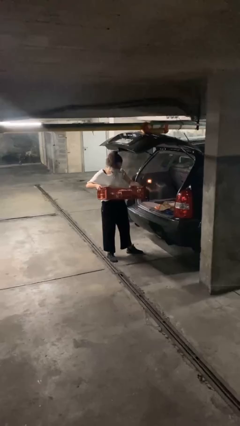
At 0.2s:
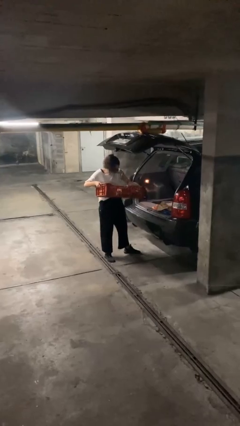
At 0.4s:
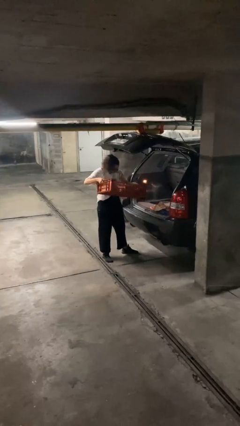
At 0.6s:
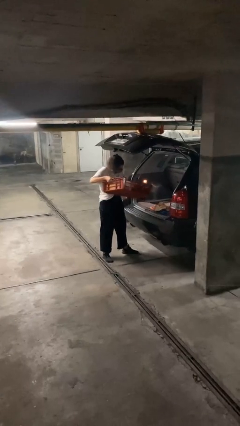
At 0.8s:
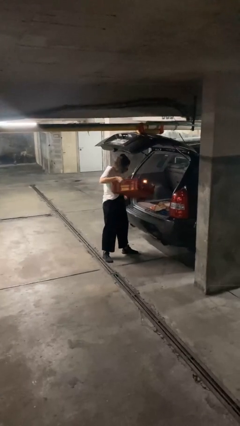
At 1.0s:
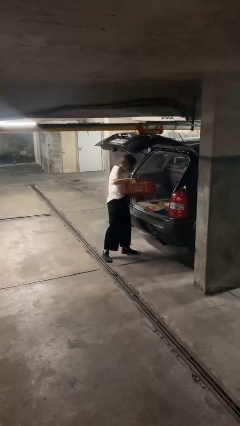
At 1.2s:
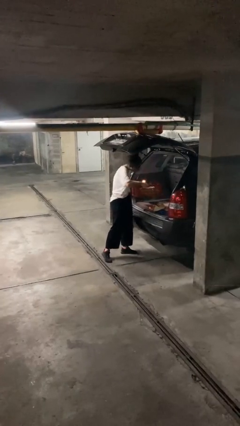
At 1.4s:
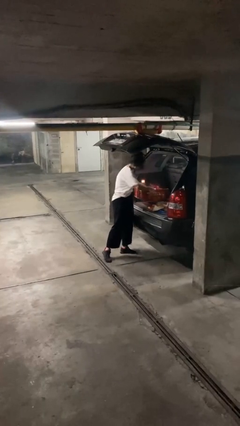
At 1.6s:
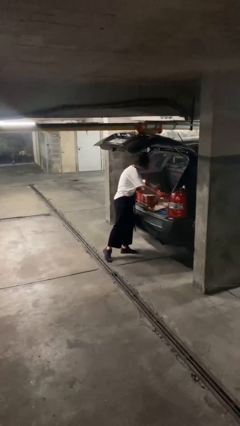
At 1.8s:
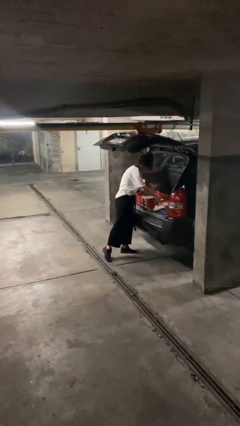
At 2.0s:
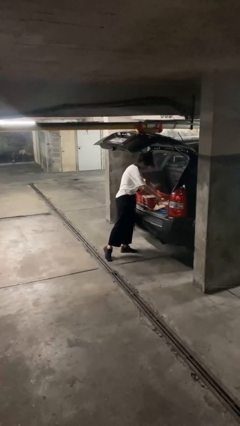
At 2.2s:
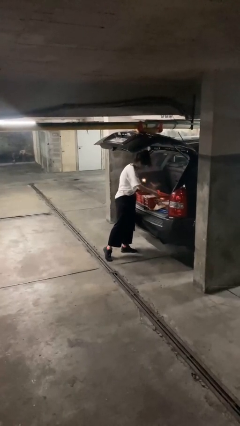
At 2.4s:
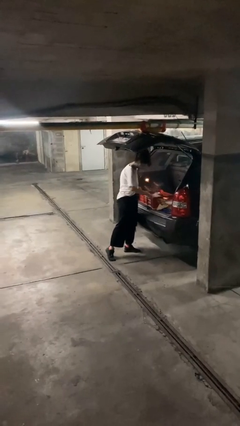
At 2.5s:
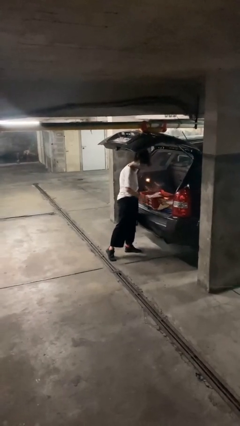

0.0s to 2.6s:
person loads car

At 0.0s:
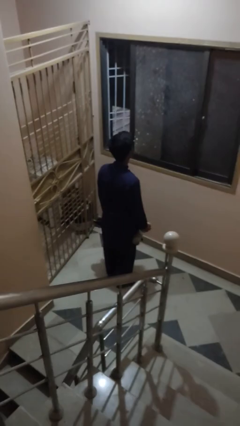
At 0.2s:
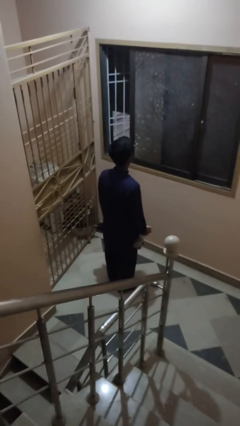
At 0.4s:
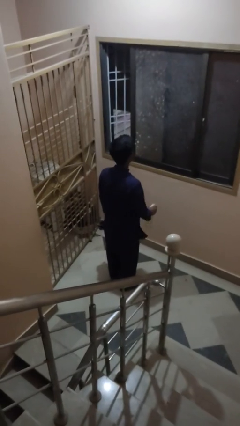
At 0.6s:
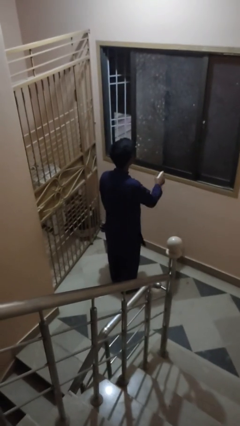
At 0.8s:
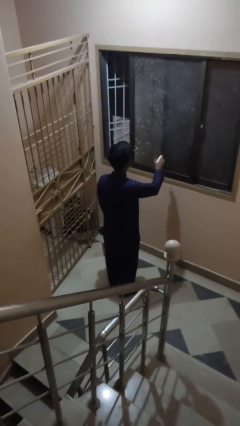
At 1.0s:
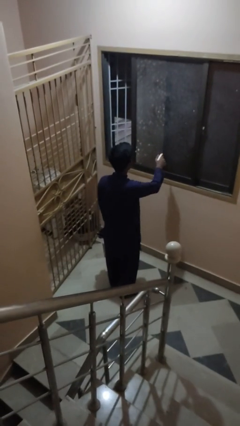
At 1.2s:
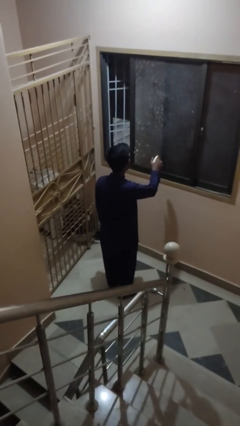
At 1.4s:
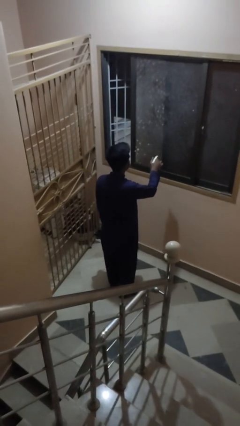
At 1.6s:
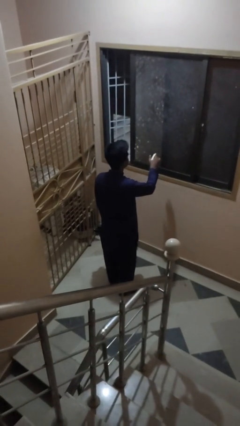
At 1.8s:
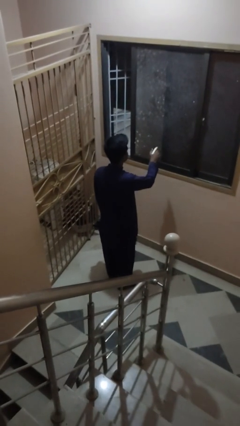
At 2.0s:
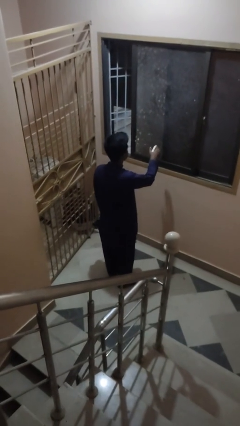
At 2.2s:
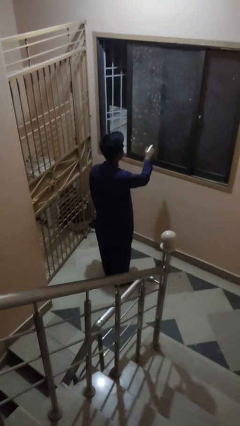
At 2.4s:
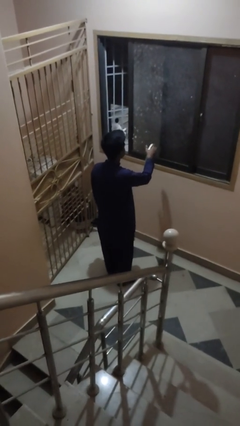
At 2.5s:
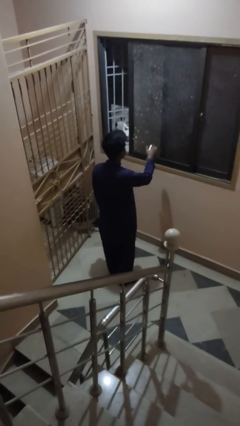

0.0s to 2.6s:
person sprays from bottle

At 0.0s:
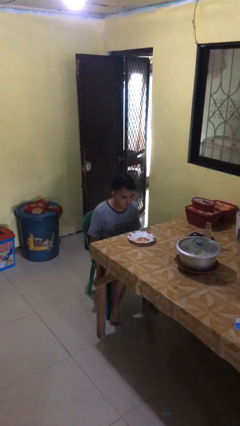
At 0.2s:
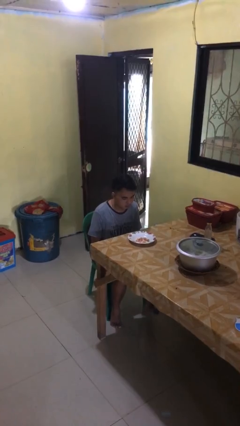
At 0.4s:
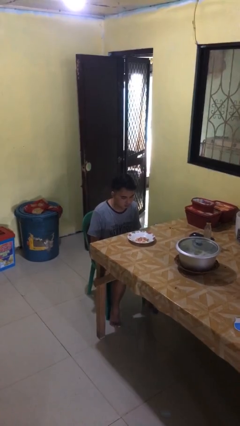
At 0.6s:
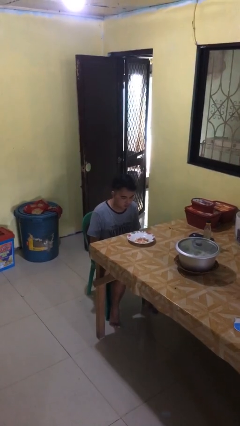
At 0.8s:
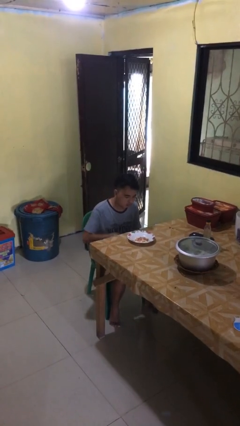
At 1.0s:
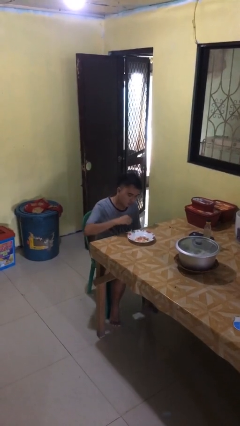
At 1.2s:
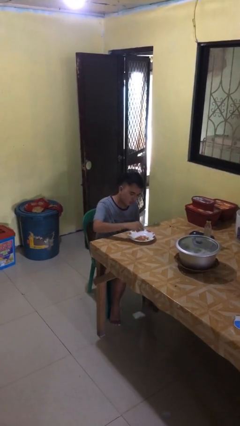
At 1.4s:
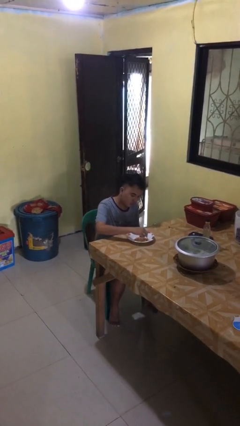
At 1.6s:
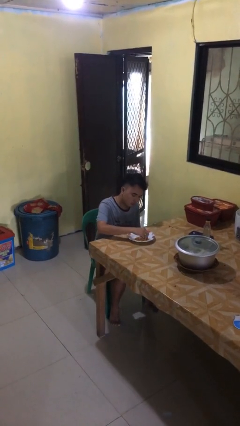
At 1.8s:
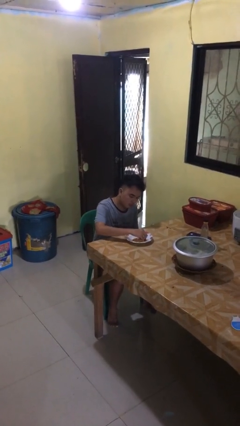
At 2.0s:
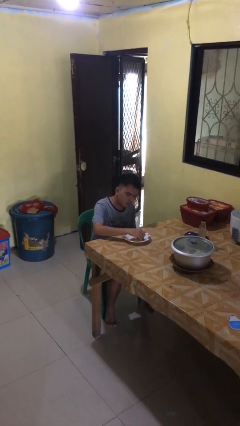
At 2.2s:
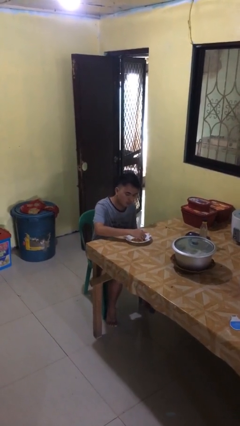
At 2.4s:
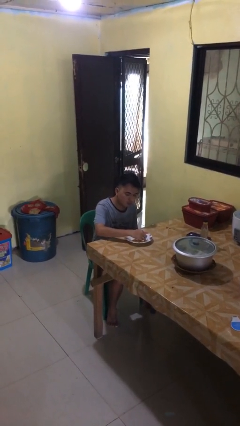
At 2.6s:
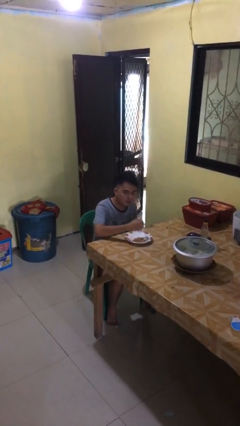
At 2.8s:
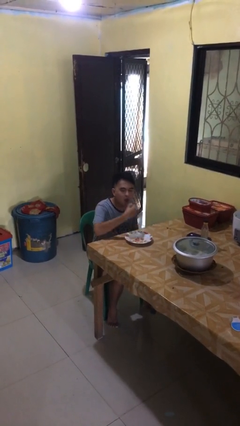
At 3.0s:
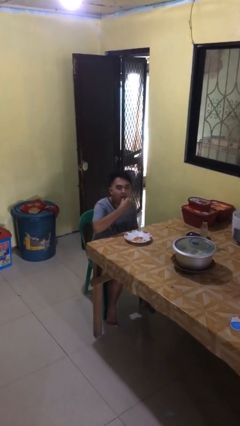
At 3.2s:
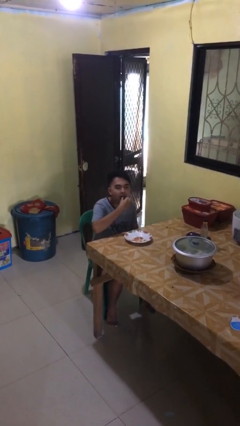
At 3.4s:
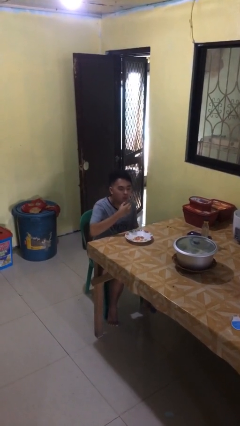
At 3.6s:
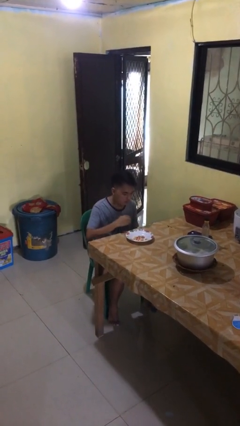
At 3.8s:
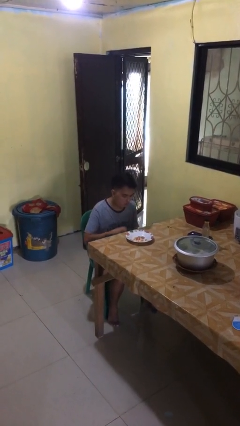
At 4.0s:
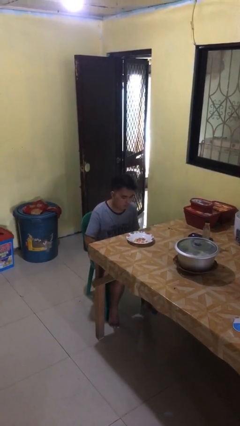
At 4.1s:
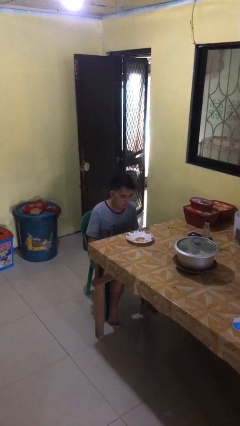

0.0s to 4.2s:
person eats with hands

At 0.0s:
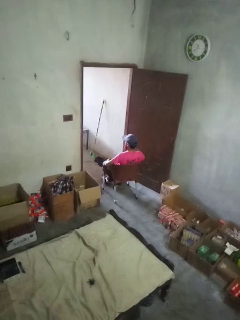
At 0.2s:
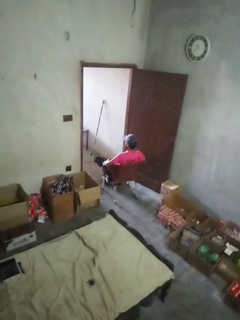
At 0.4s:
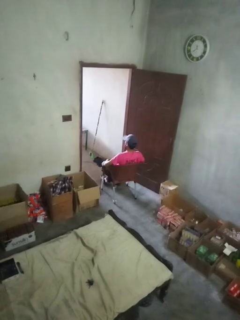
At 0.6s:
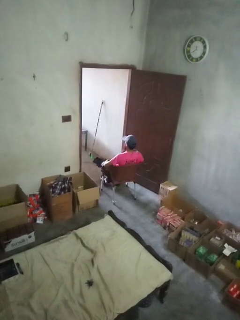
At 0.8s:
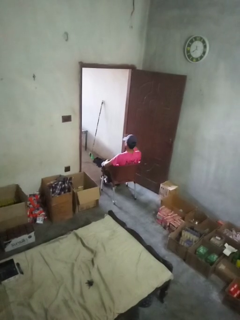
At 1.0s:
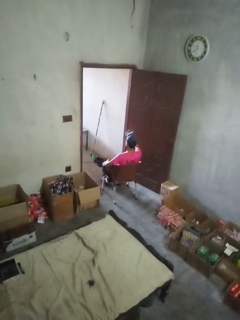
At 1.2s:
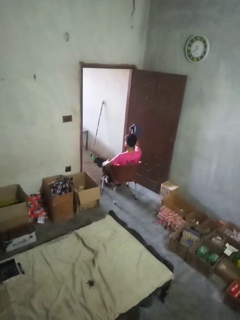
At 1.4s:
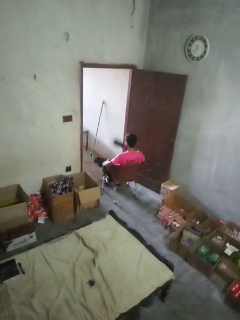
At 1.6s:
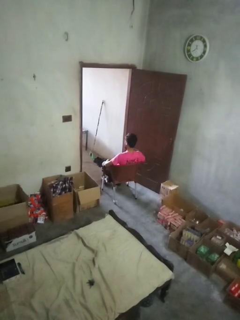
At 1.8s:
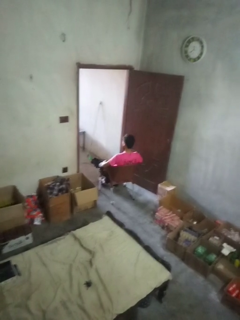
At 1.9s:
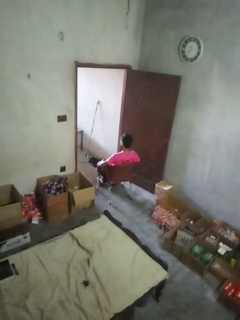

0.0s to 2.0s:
person takes off hat

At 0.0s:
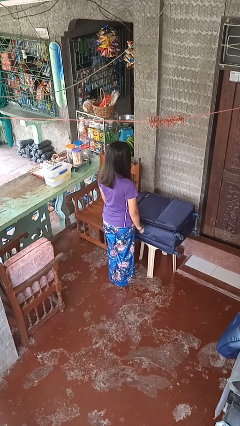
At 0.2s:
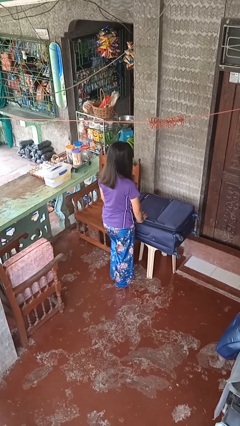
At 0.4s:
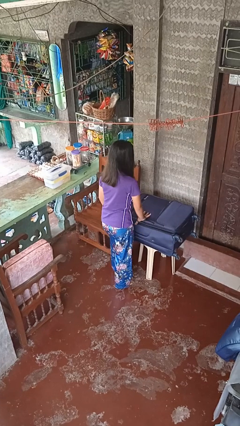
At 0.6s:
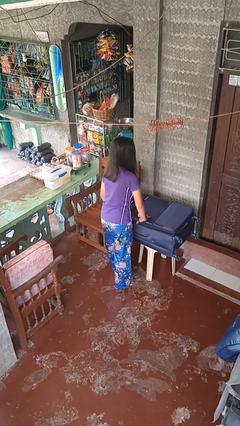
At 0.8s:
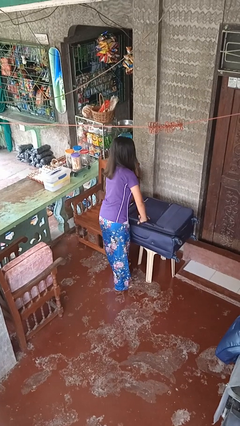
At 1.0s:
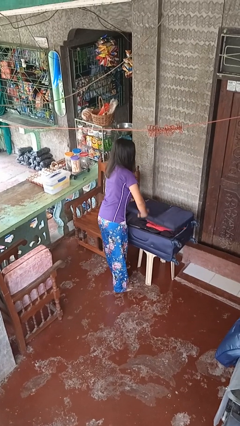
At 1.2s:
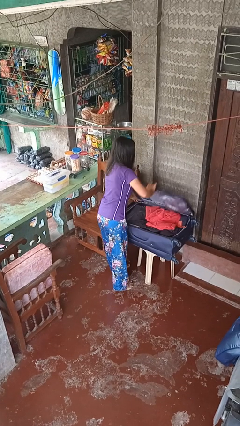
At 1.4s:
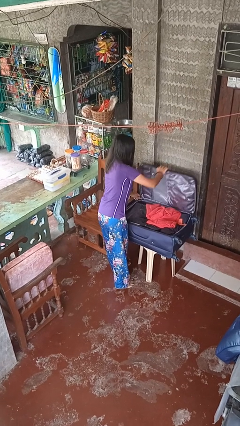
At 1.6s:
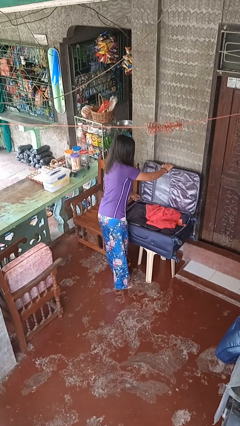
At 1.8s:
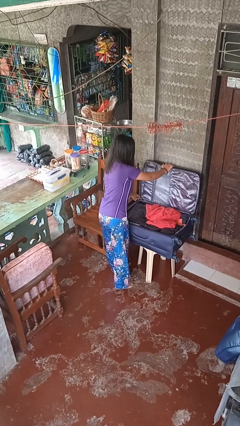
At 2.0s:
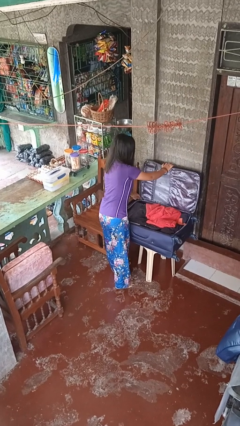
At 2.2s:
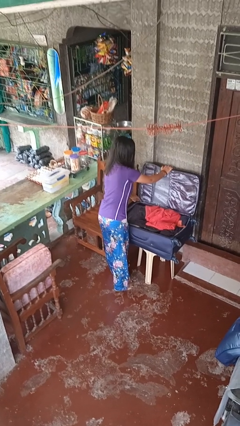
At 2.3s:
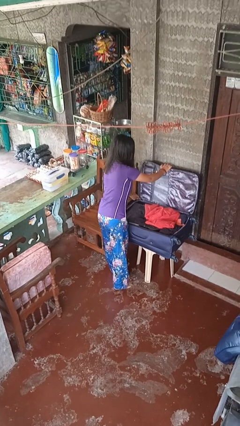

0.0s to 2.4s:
person opens suitcase

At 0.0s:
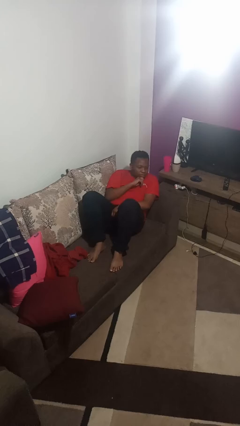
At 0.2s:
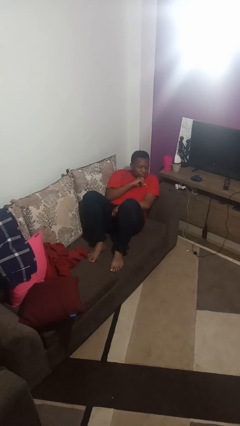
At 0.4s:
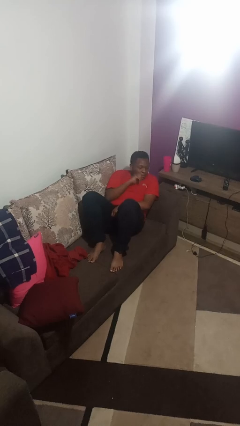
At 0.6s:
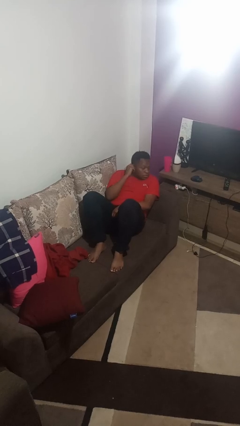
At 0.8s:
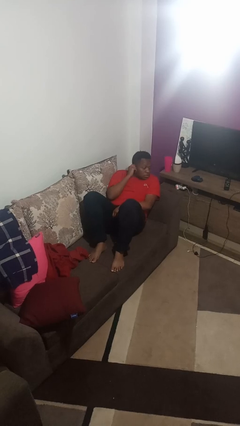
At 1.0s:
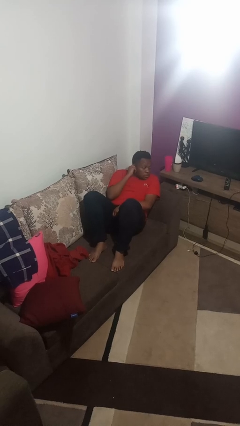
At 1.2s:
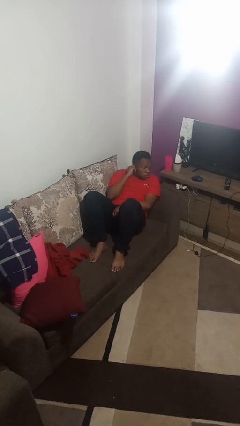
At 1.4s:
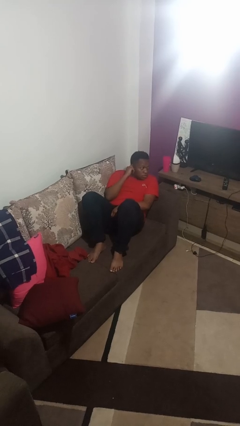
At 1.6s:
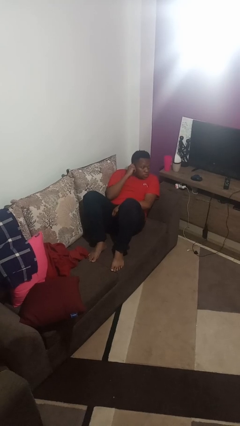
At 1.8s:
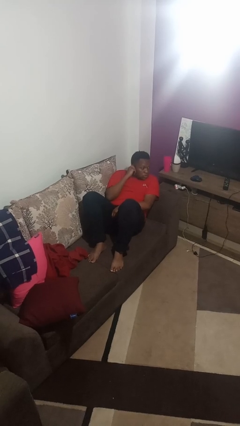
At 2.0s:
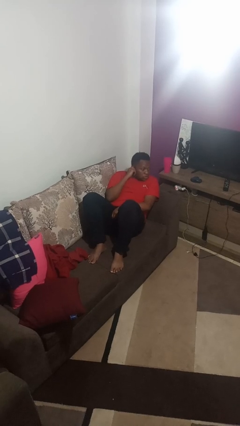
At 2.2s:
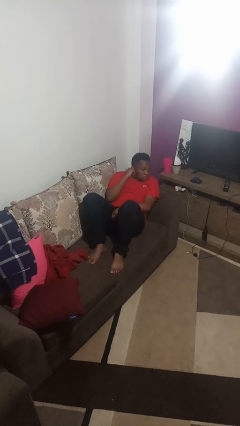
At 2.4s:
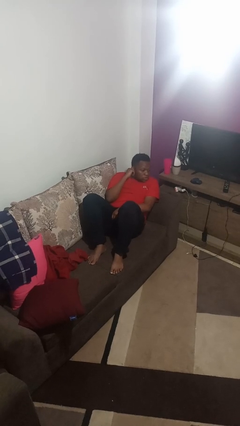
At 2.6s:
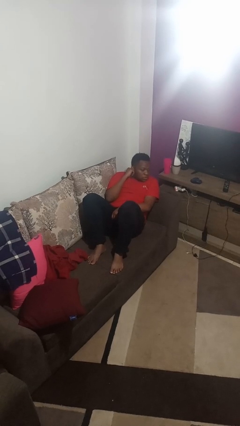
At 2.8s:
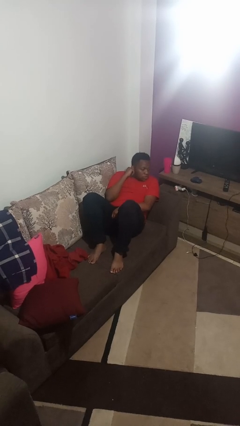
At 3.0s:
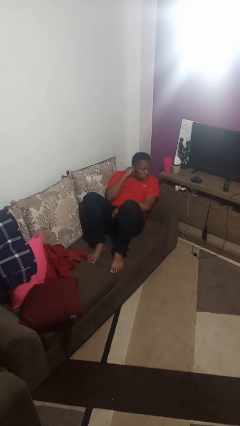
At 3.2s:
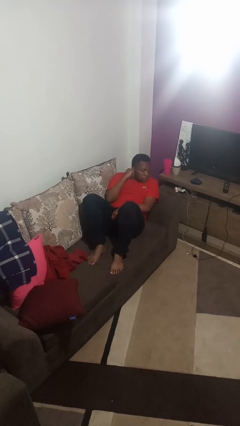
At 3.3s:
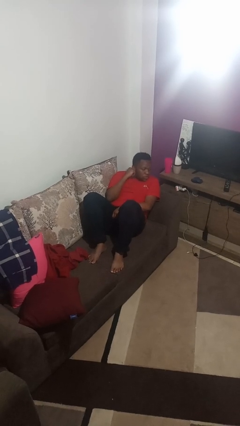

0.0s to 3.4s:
person touches earlobe

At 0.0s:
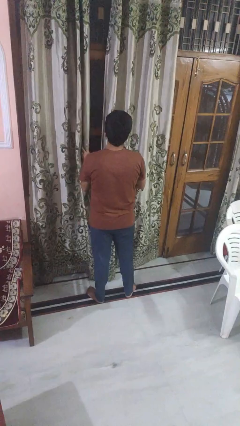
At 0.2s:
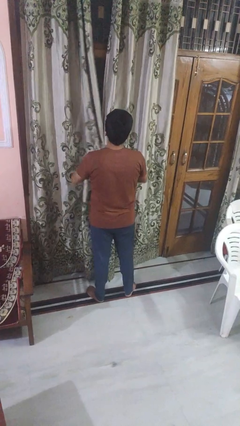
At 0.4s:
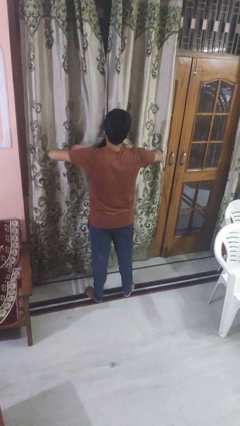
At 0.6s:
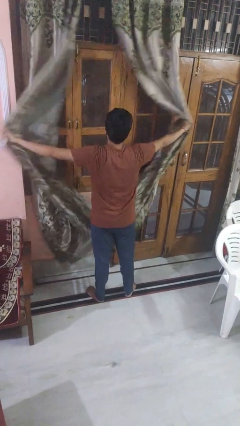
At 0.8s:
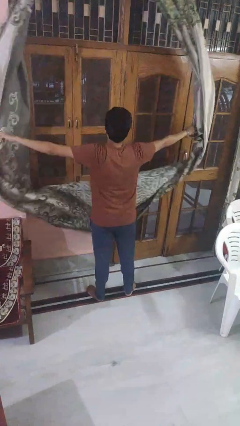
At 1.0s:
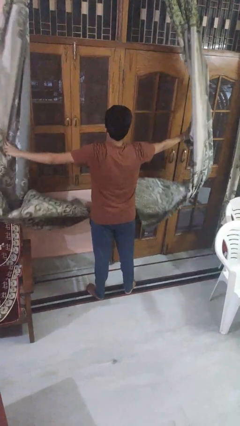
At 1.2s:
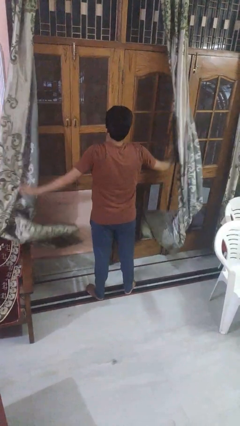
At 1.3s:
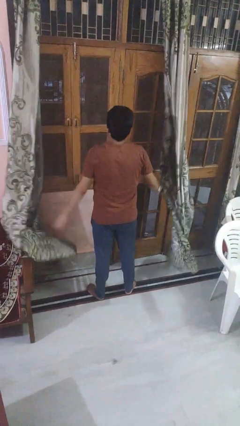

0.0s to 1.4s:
person opens curtains
